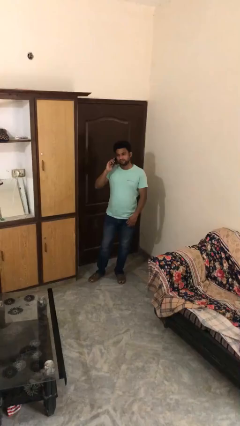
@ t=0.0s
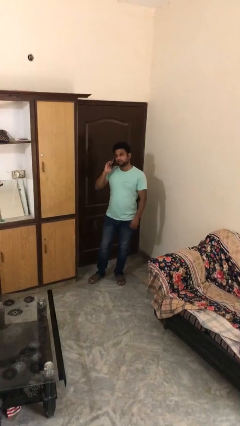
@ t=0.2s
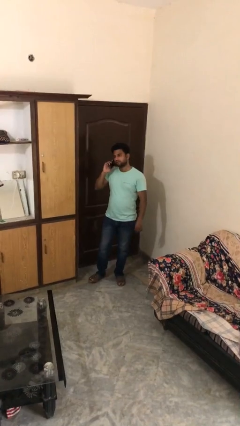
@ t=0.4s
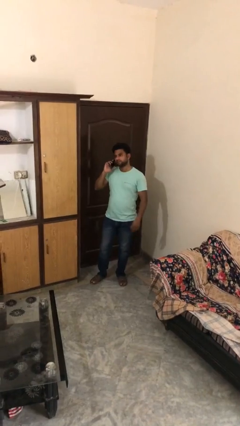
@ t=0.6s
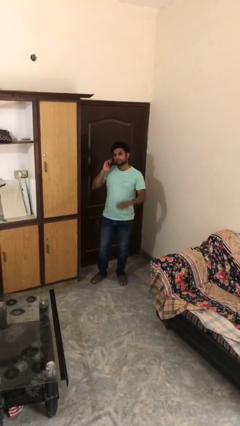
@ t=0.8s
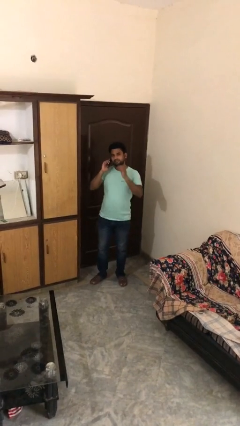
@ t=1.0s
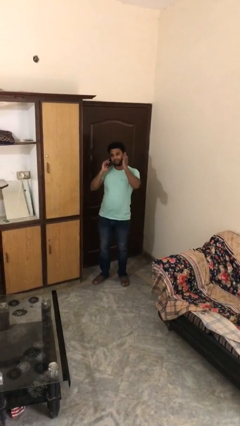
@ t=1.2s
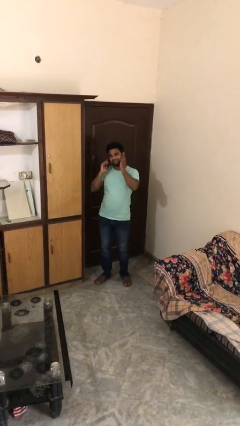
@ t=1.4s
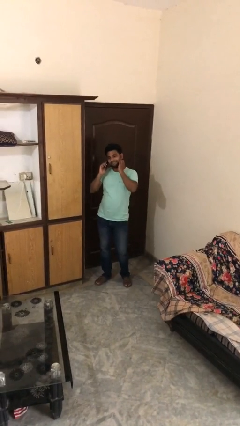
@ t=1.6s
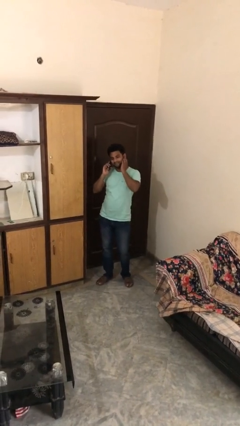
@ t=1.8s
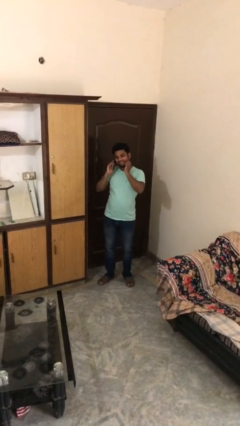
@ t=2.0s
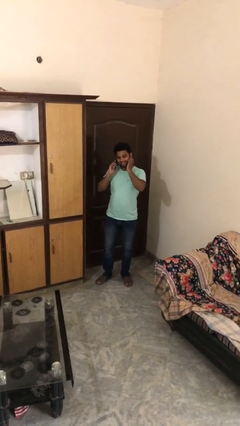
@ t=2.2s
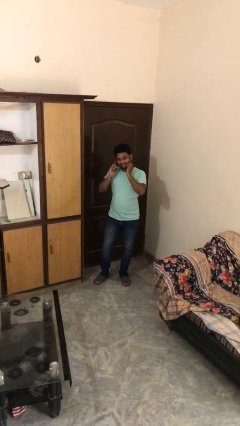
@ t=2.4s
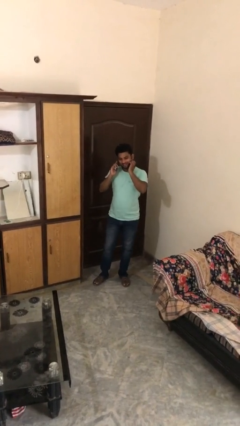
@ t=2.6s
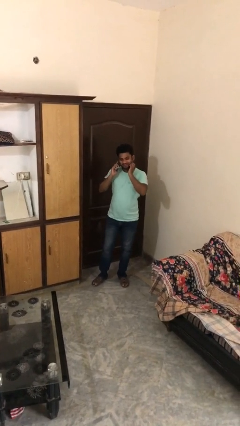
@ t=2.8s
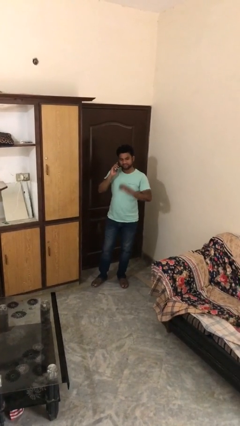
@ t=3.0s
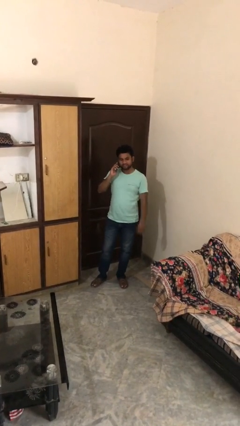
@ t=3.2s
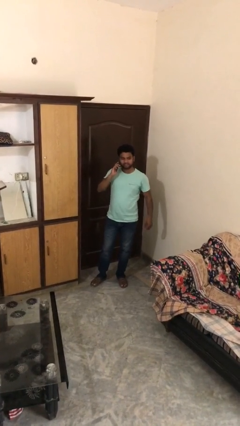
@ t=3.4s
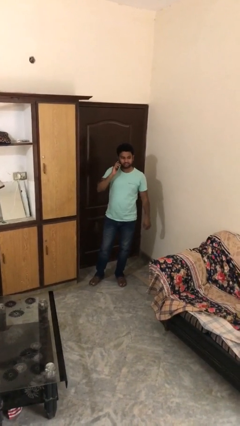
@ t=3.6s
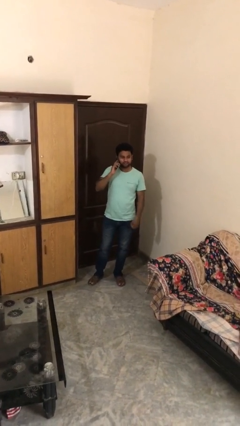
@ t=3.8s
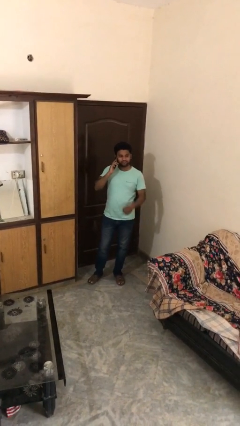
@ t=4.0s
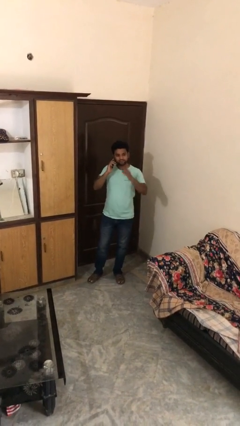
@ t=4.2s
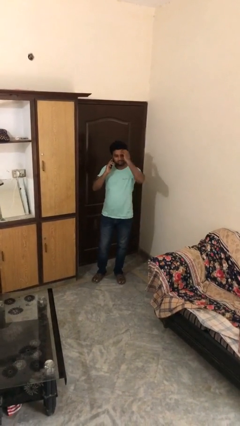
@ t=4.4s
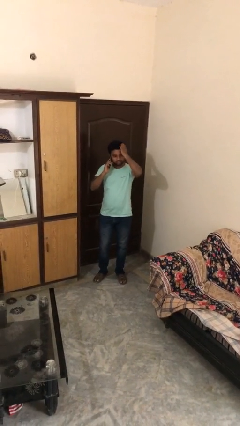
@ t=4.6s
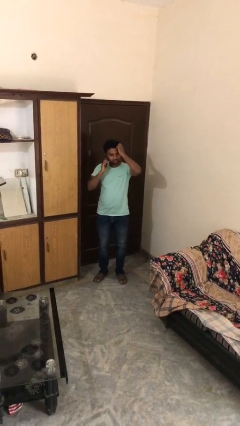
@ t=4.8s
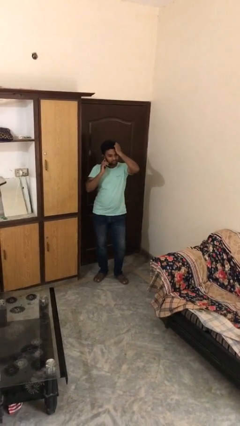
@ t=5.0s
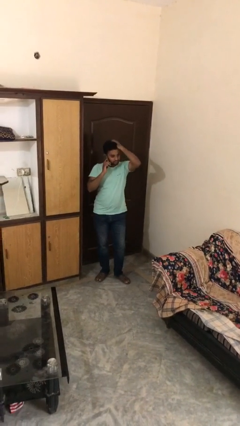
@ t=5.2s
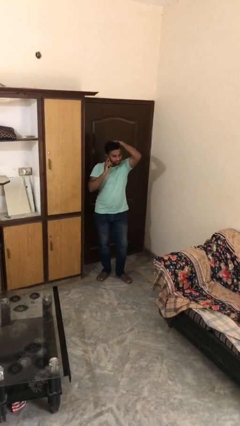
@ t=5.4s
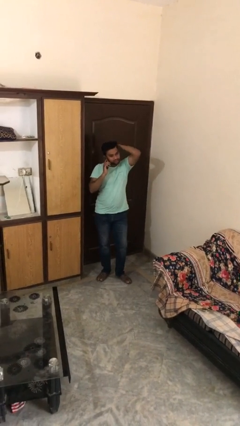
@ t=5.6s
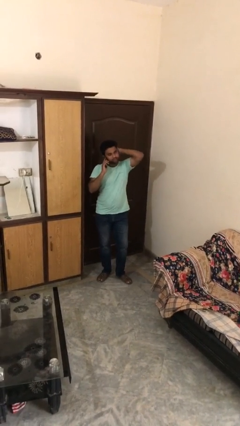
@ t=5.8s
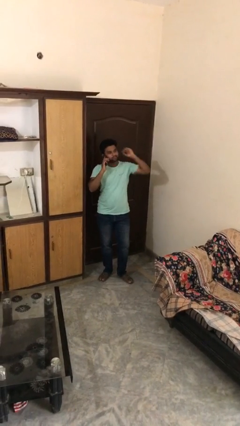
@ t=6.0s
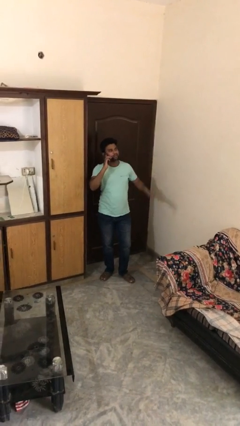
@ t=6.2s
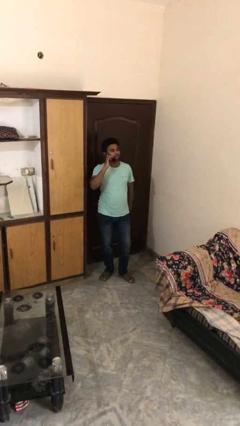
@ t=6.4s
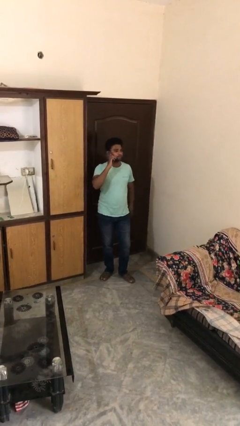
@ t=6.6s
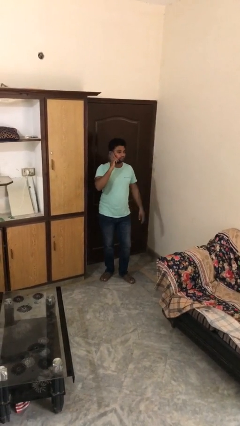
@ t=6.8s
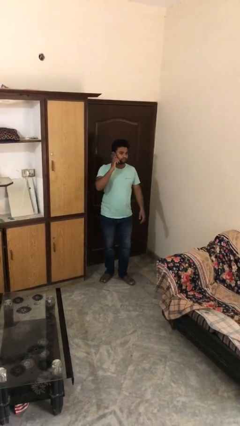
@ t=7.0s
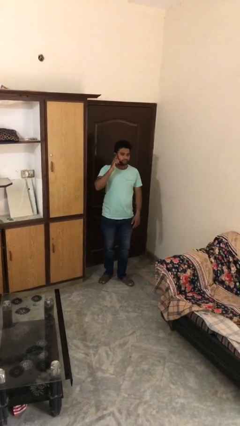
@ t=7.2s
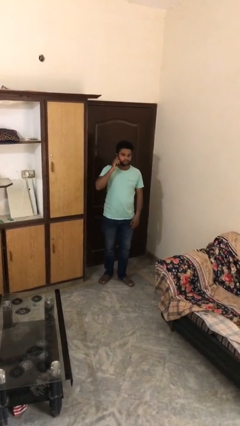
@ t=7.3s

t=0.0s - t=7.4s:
person talks on phone

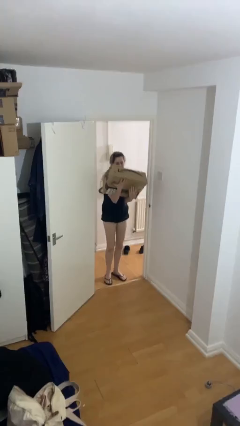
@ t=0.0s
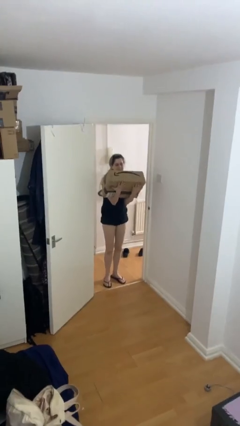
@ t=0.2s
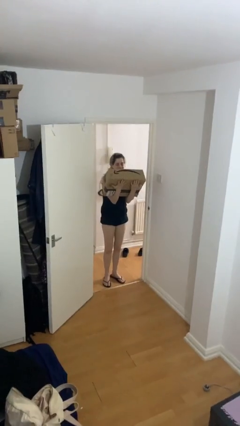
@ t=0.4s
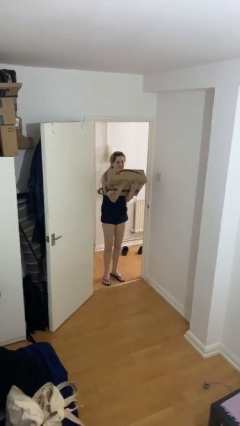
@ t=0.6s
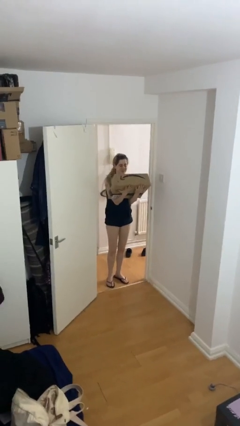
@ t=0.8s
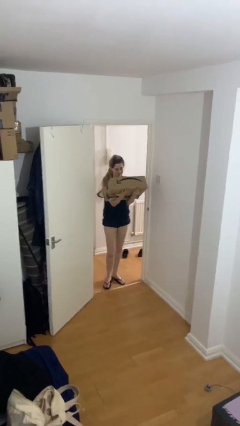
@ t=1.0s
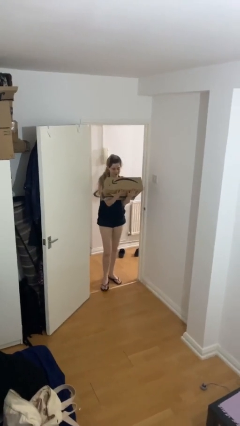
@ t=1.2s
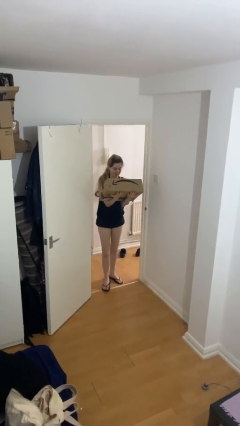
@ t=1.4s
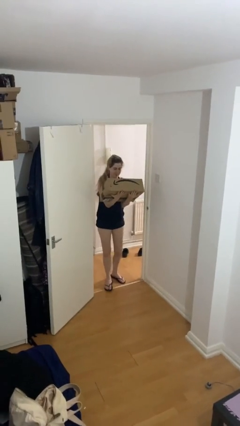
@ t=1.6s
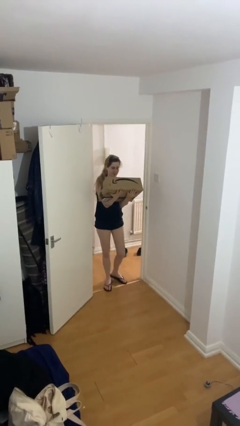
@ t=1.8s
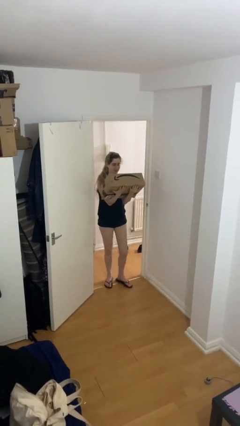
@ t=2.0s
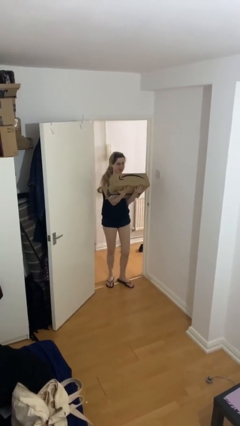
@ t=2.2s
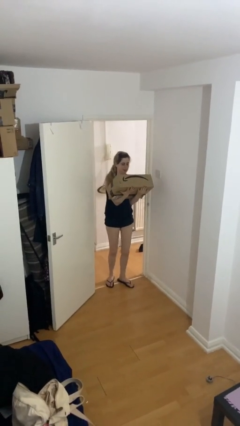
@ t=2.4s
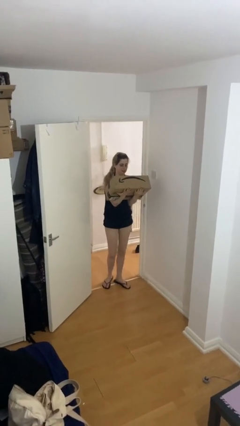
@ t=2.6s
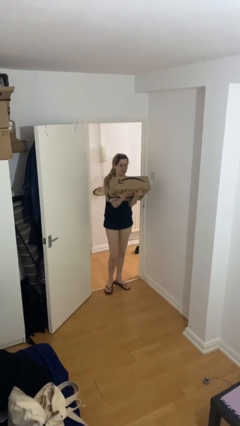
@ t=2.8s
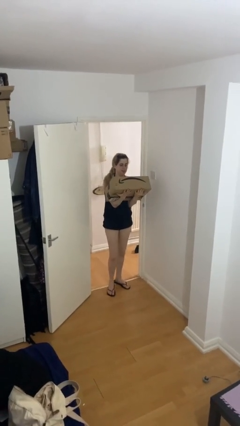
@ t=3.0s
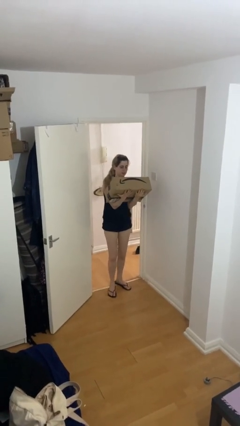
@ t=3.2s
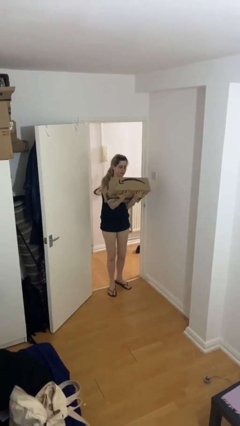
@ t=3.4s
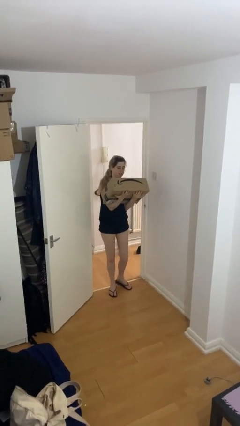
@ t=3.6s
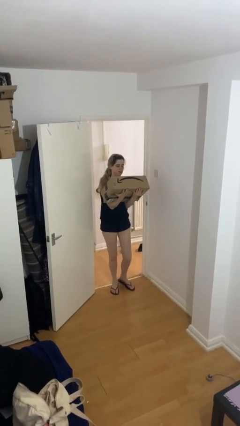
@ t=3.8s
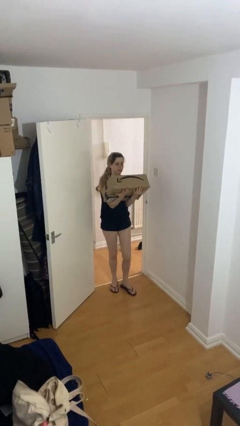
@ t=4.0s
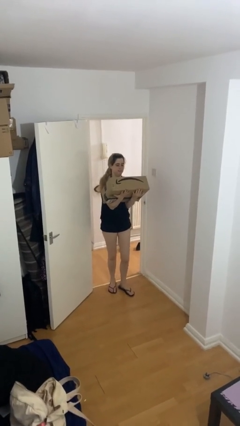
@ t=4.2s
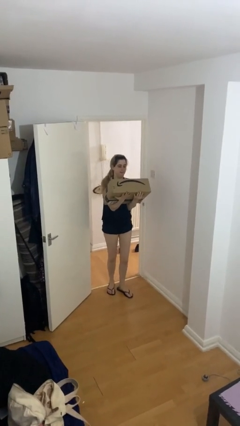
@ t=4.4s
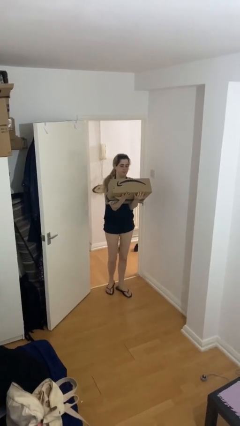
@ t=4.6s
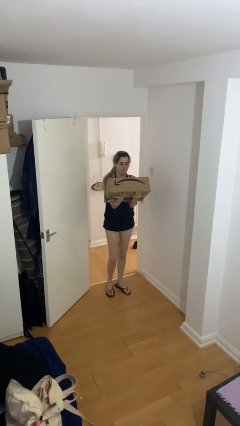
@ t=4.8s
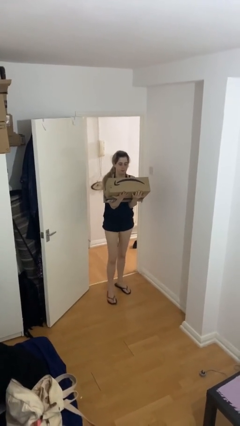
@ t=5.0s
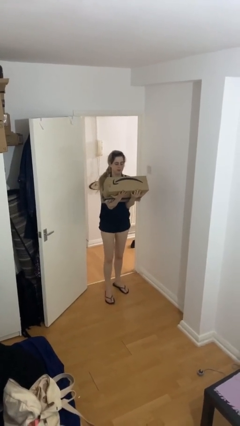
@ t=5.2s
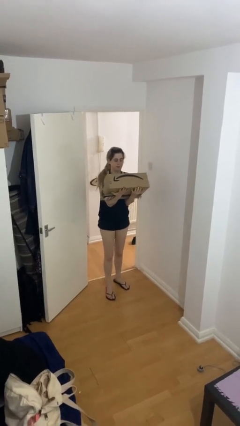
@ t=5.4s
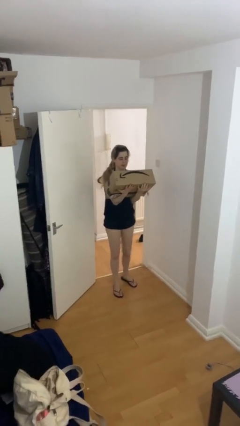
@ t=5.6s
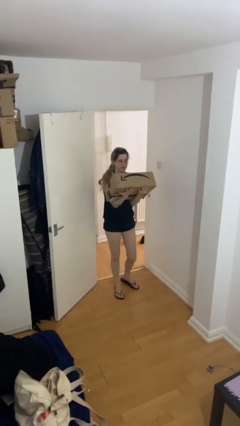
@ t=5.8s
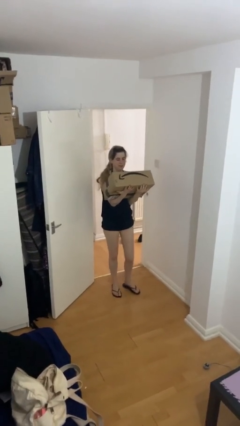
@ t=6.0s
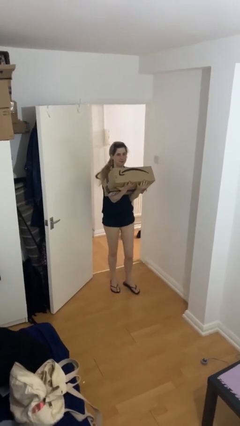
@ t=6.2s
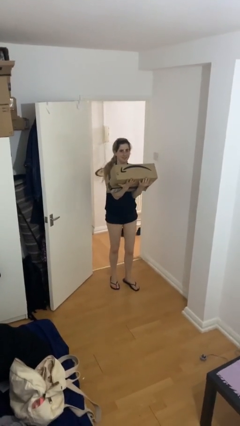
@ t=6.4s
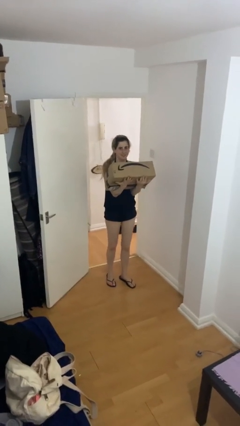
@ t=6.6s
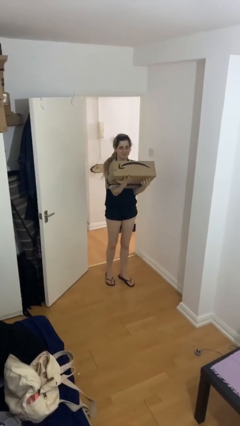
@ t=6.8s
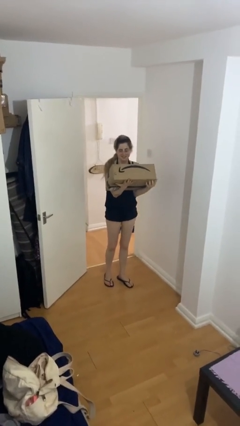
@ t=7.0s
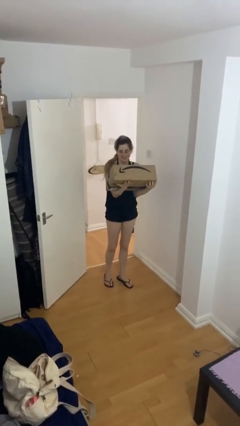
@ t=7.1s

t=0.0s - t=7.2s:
person carries heavy object

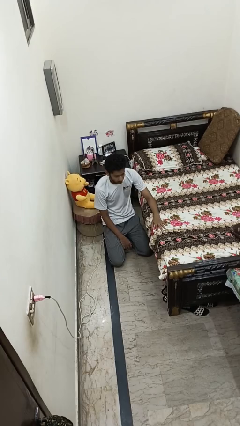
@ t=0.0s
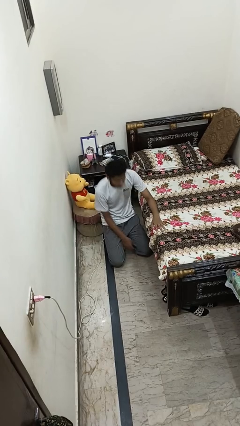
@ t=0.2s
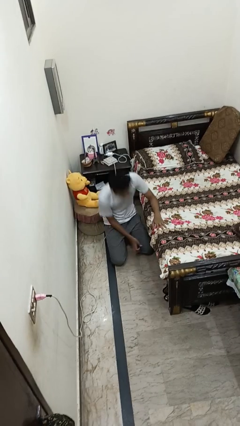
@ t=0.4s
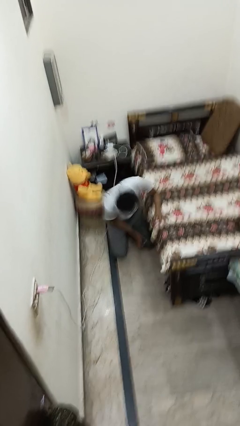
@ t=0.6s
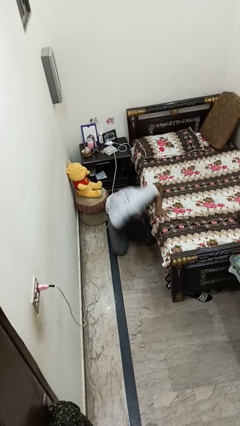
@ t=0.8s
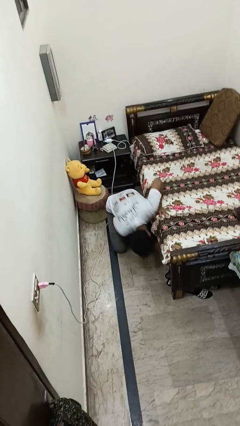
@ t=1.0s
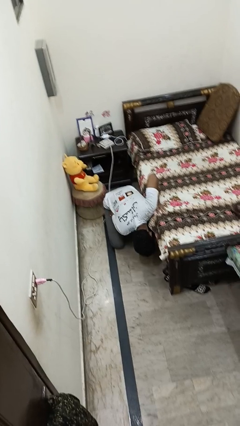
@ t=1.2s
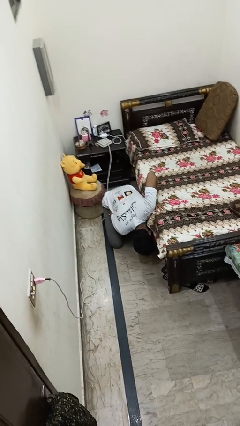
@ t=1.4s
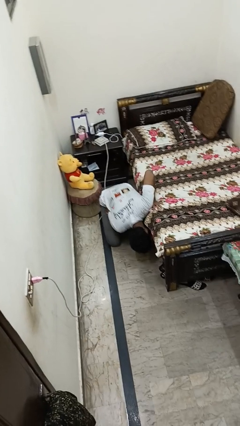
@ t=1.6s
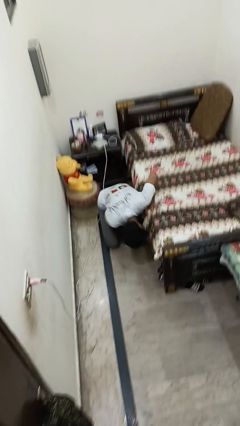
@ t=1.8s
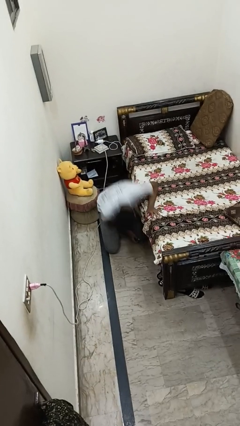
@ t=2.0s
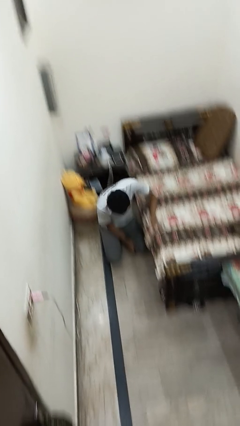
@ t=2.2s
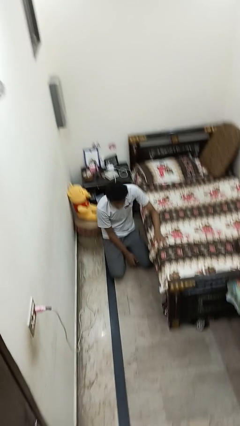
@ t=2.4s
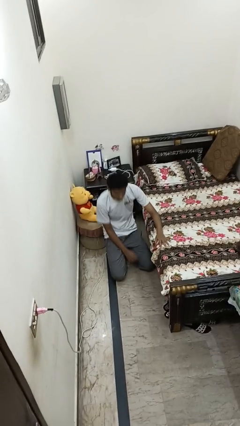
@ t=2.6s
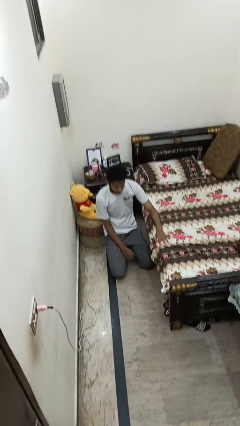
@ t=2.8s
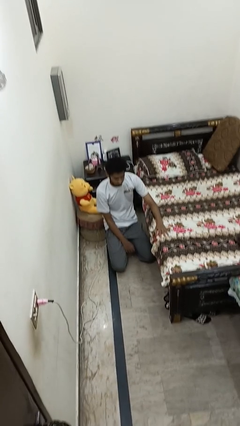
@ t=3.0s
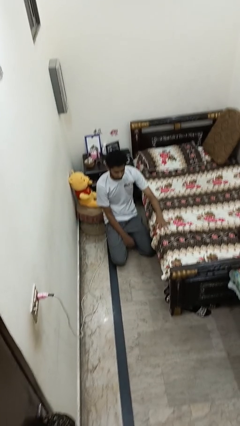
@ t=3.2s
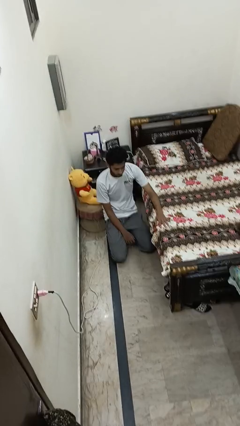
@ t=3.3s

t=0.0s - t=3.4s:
person searches under bed
